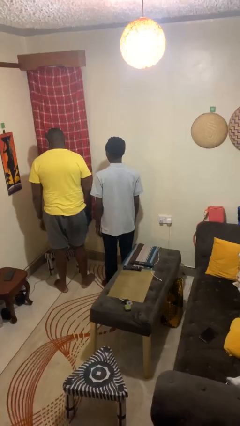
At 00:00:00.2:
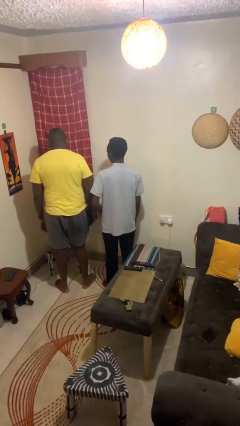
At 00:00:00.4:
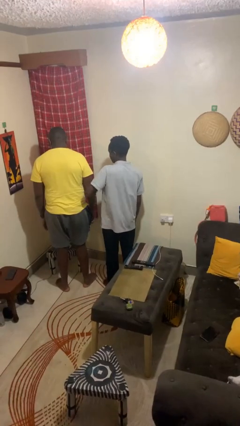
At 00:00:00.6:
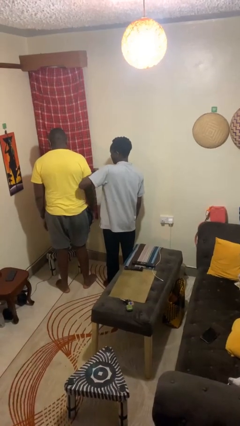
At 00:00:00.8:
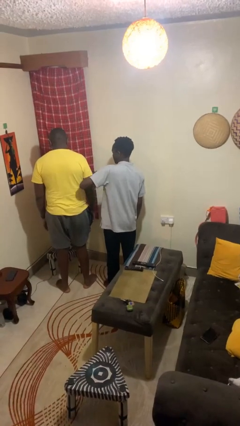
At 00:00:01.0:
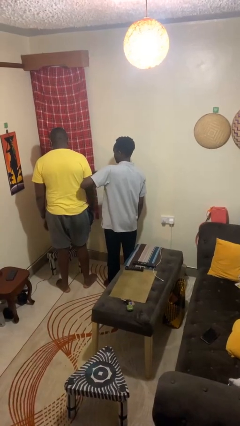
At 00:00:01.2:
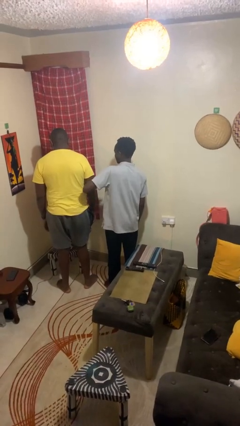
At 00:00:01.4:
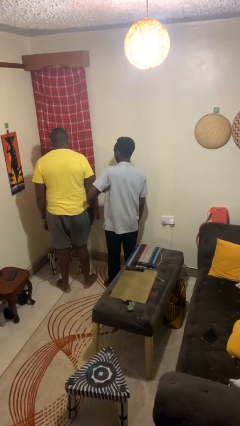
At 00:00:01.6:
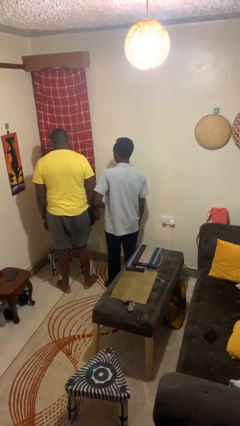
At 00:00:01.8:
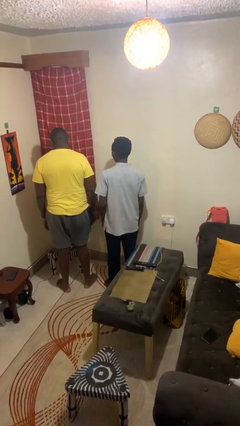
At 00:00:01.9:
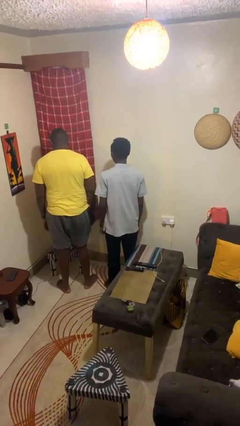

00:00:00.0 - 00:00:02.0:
person nudges person with elbow

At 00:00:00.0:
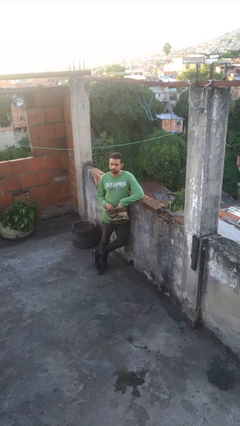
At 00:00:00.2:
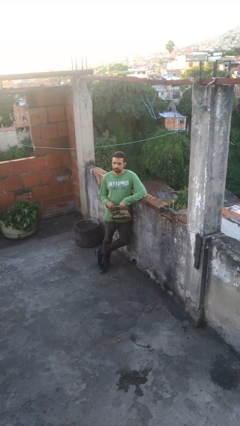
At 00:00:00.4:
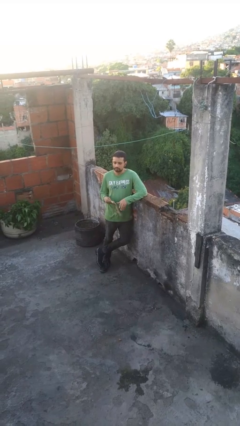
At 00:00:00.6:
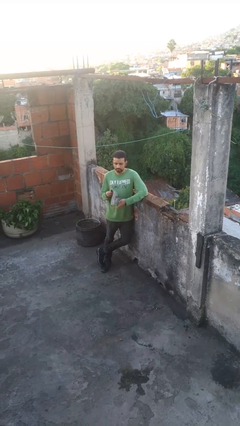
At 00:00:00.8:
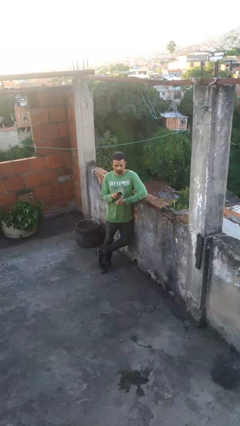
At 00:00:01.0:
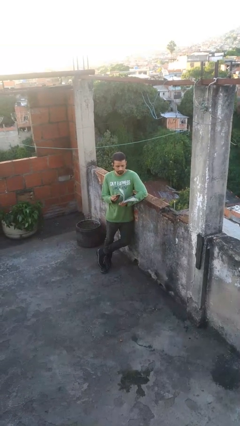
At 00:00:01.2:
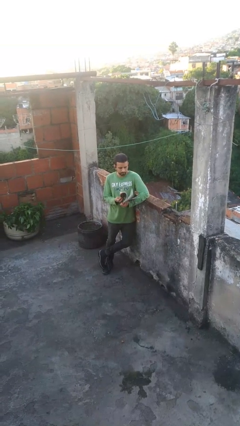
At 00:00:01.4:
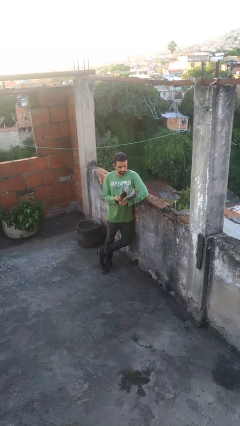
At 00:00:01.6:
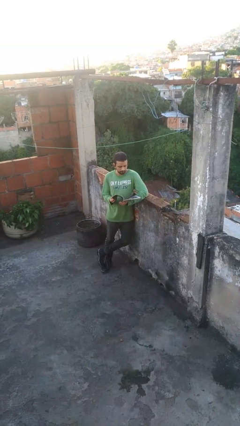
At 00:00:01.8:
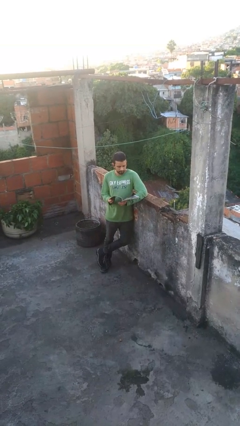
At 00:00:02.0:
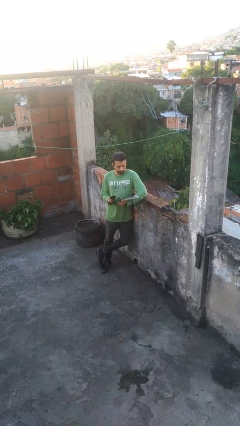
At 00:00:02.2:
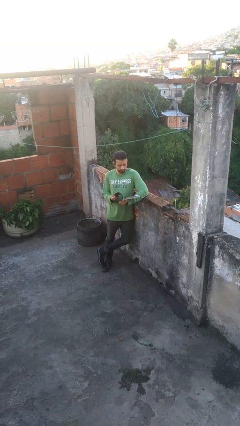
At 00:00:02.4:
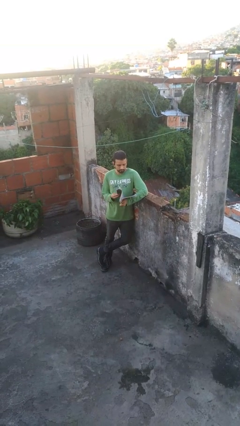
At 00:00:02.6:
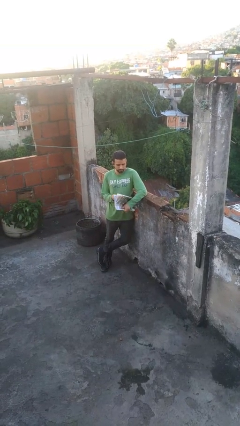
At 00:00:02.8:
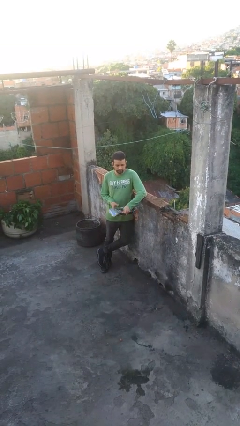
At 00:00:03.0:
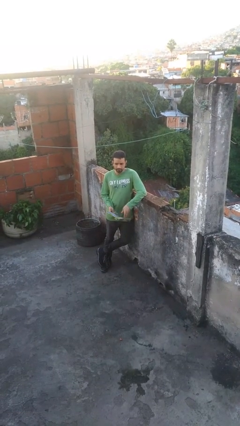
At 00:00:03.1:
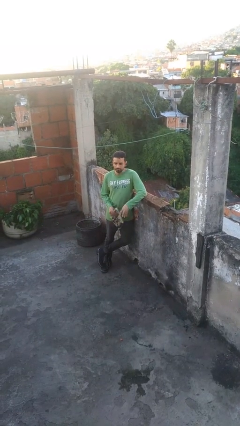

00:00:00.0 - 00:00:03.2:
person reads magazine

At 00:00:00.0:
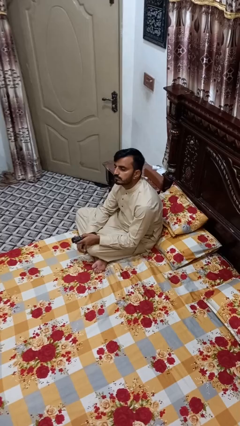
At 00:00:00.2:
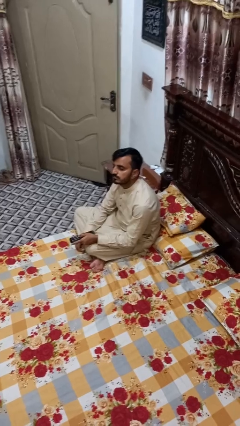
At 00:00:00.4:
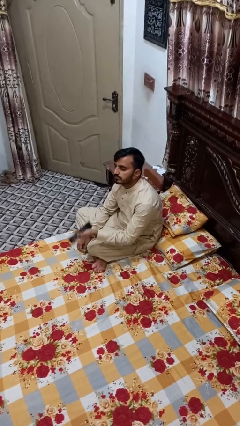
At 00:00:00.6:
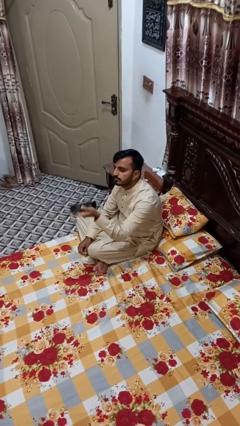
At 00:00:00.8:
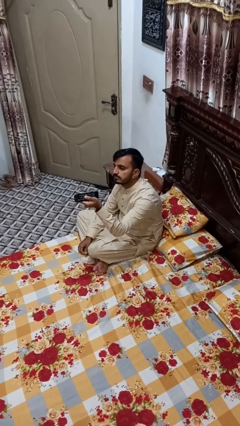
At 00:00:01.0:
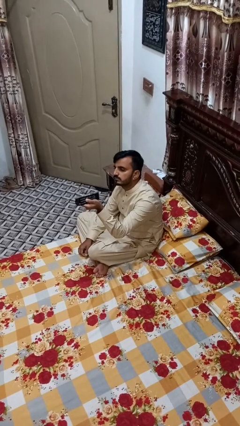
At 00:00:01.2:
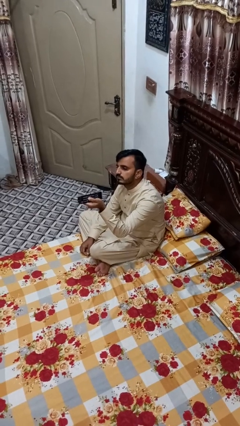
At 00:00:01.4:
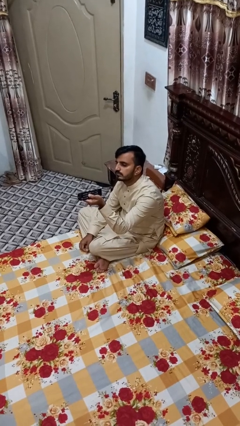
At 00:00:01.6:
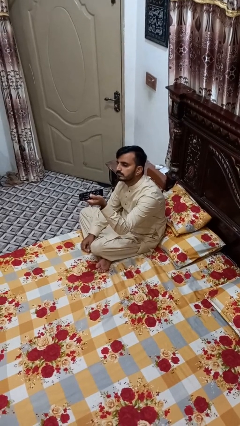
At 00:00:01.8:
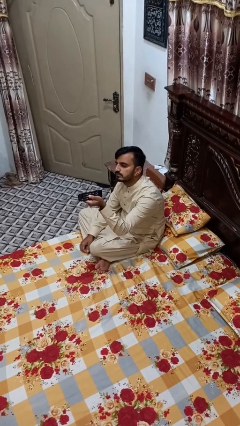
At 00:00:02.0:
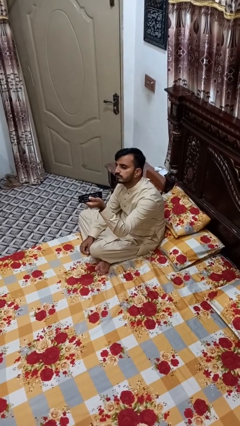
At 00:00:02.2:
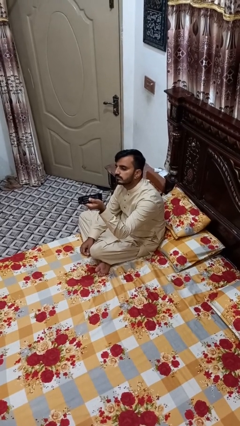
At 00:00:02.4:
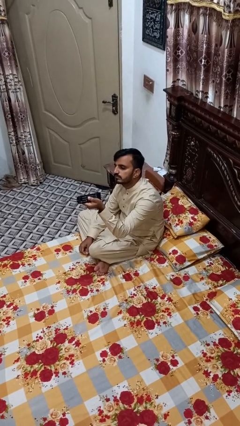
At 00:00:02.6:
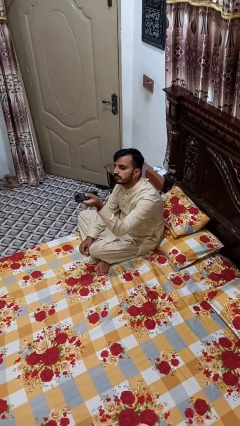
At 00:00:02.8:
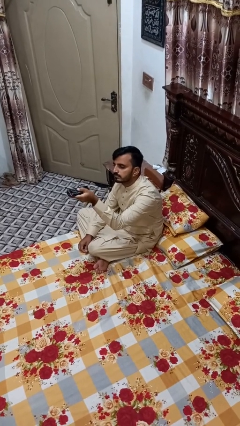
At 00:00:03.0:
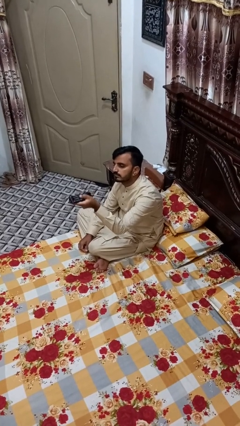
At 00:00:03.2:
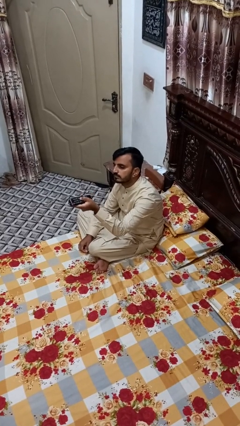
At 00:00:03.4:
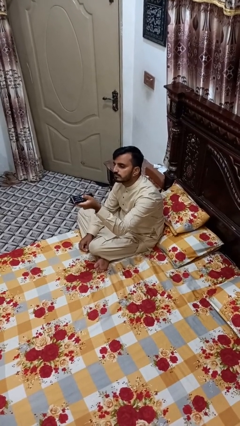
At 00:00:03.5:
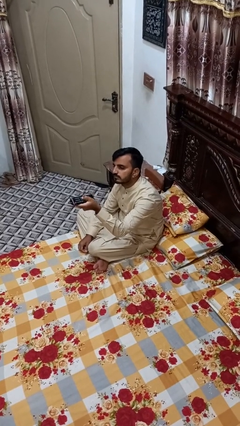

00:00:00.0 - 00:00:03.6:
person uses television remote

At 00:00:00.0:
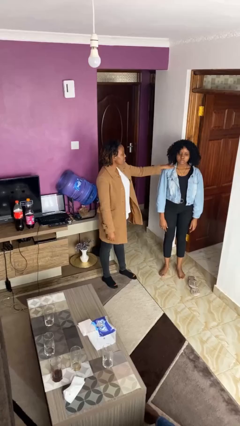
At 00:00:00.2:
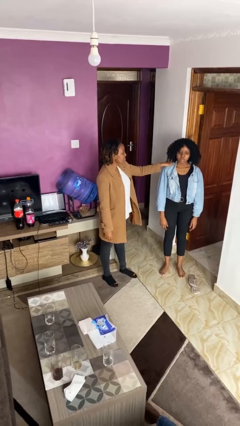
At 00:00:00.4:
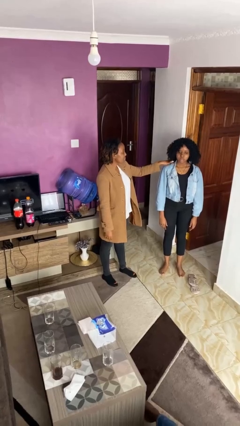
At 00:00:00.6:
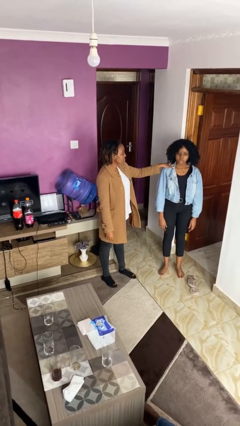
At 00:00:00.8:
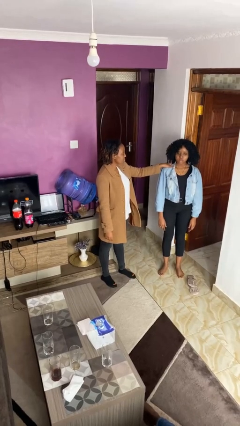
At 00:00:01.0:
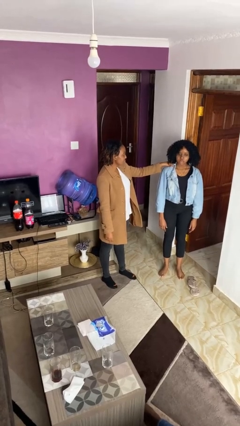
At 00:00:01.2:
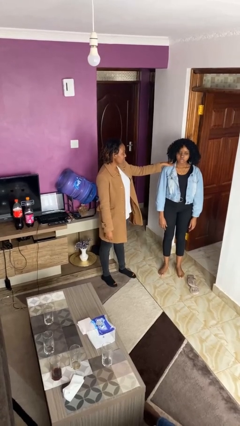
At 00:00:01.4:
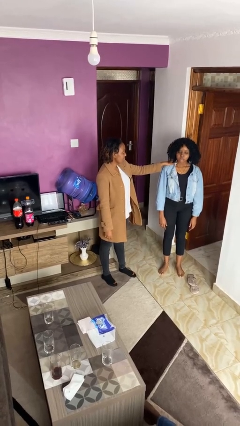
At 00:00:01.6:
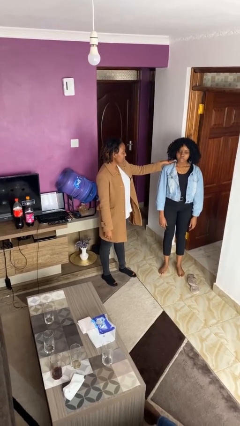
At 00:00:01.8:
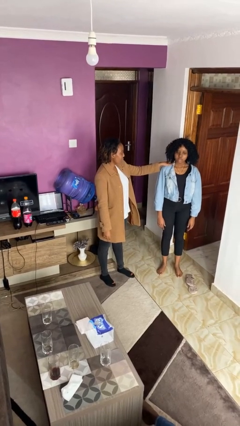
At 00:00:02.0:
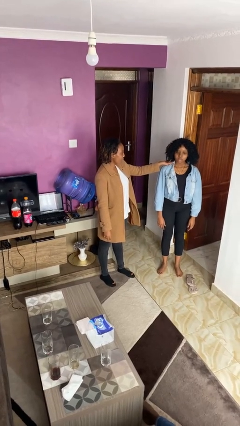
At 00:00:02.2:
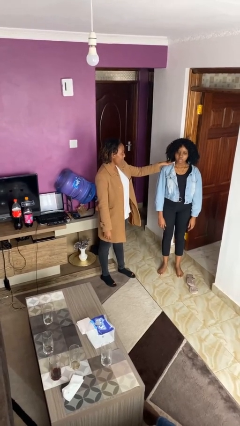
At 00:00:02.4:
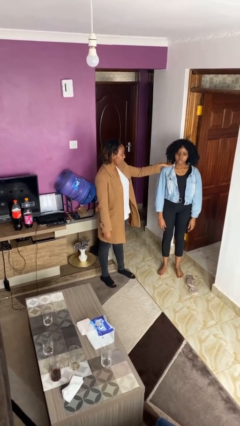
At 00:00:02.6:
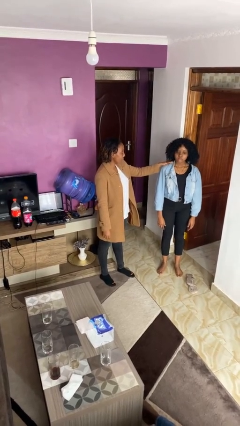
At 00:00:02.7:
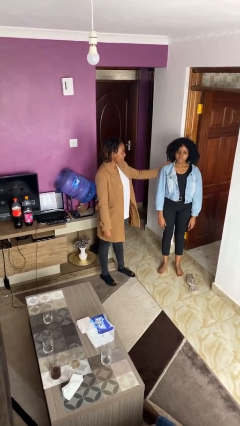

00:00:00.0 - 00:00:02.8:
person pounds shoulders of person

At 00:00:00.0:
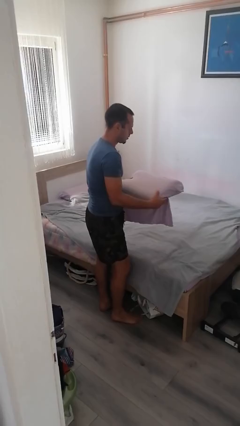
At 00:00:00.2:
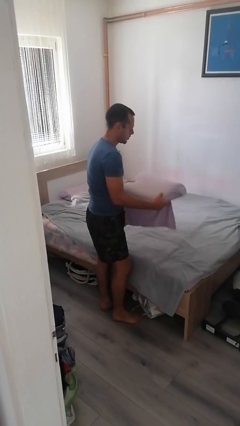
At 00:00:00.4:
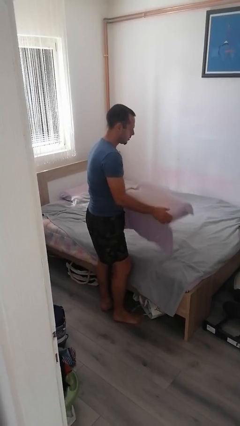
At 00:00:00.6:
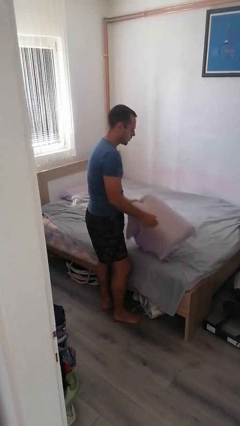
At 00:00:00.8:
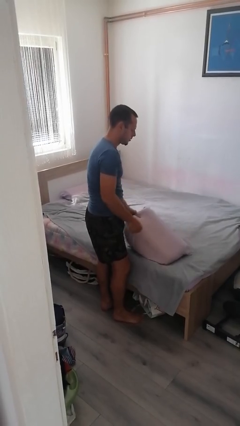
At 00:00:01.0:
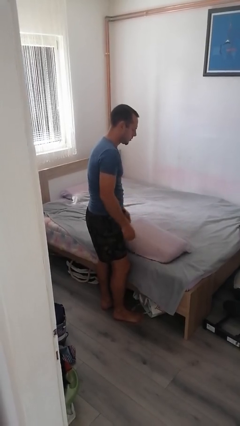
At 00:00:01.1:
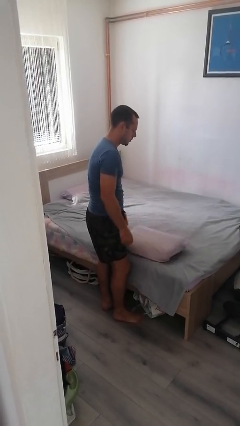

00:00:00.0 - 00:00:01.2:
person puts down object on bed

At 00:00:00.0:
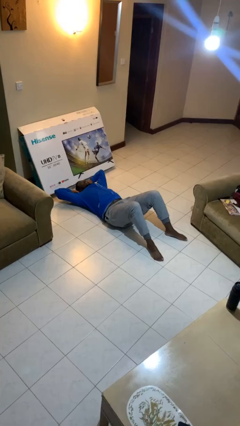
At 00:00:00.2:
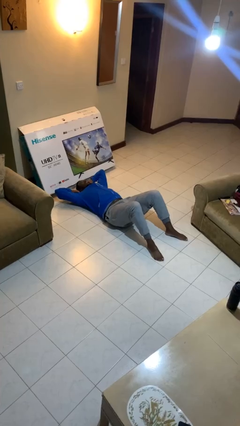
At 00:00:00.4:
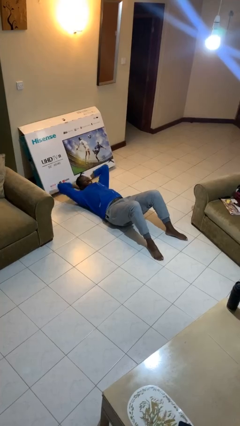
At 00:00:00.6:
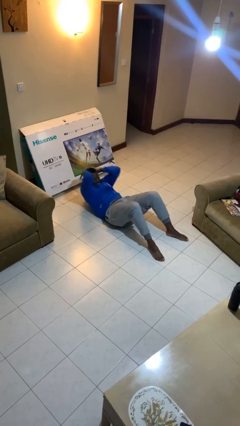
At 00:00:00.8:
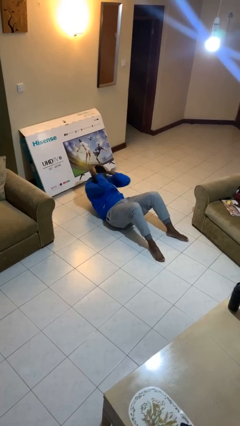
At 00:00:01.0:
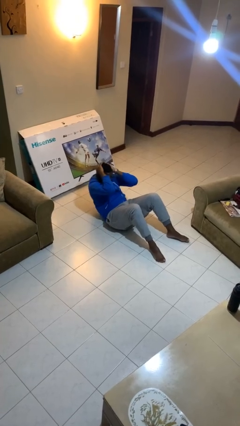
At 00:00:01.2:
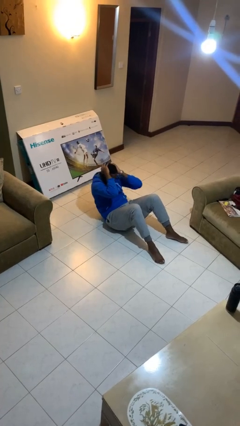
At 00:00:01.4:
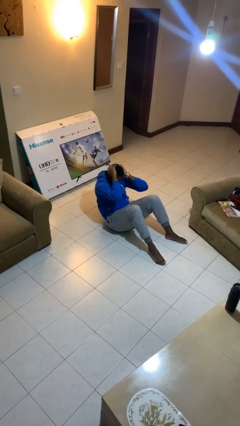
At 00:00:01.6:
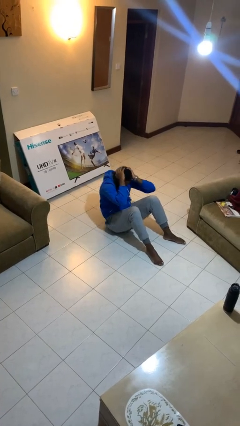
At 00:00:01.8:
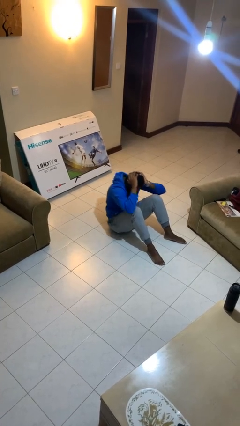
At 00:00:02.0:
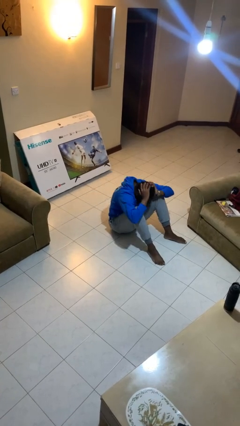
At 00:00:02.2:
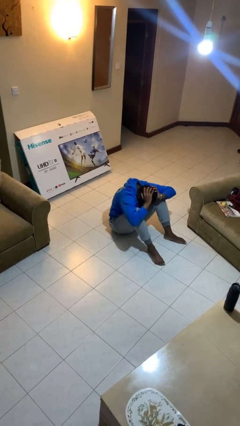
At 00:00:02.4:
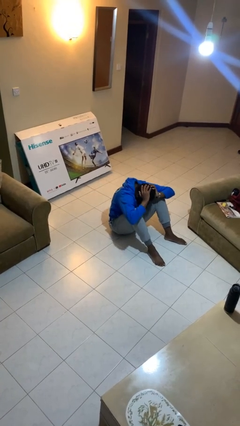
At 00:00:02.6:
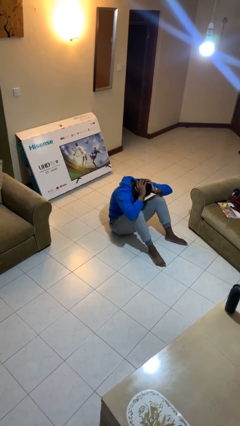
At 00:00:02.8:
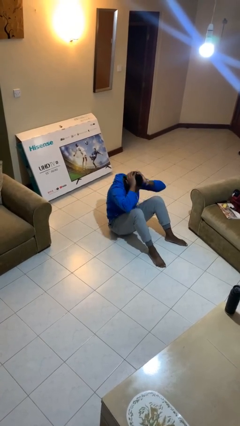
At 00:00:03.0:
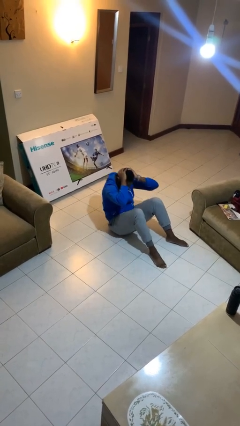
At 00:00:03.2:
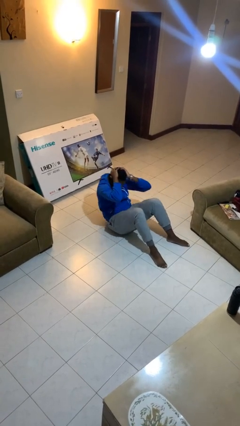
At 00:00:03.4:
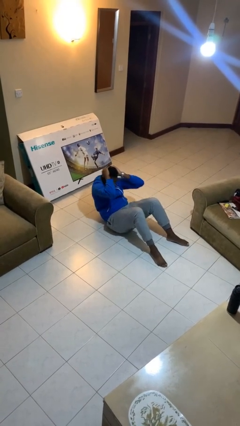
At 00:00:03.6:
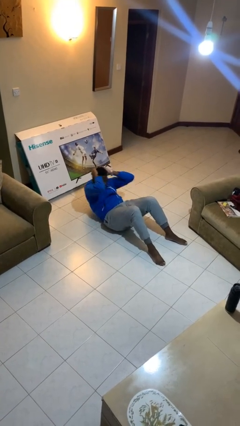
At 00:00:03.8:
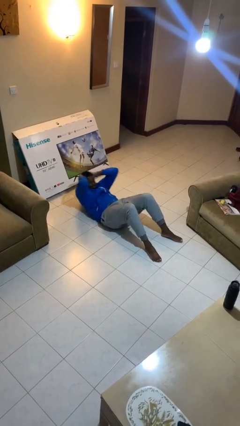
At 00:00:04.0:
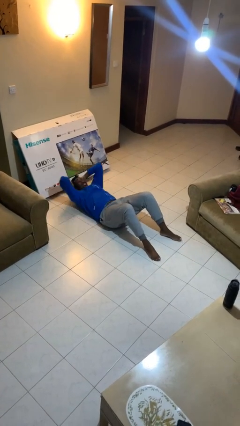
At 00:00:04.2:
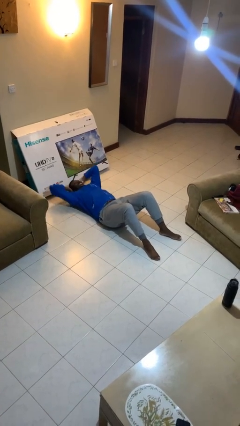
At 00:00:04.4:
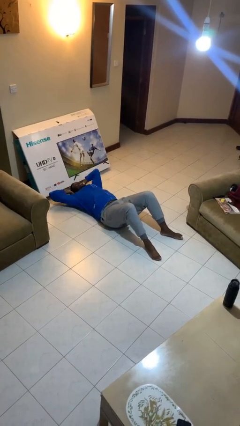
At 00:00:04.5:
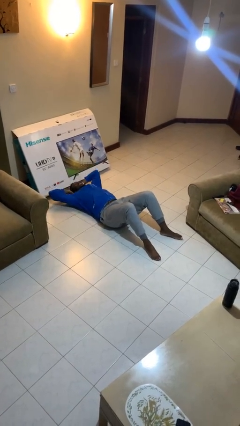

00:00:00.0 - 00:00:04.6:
person exercises with situp
